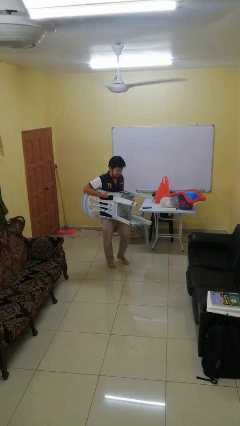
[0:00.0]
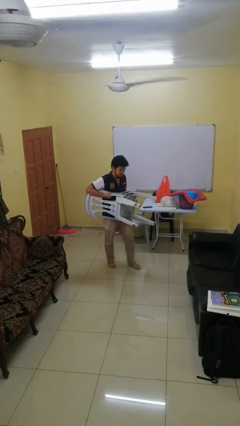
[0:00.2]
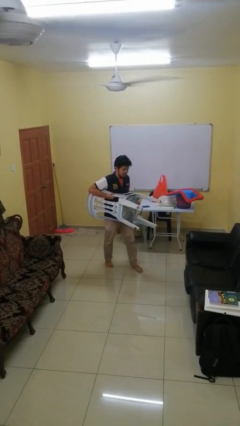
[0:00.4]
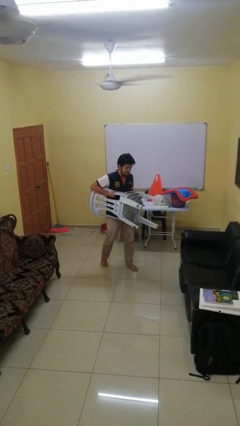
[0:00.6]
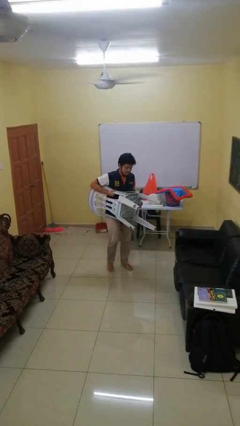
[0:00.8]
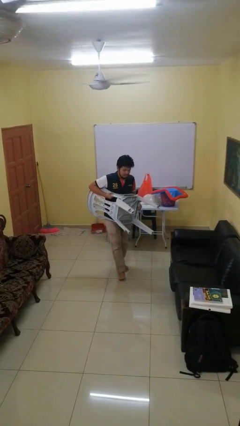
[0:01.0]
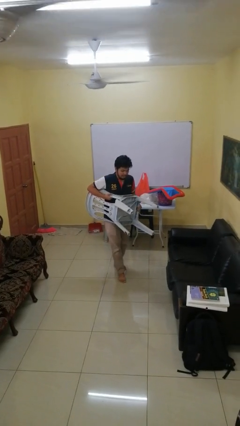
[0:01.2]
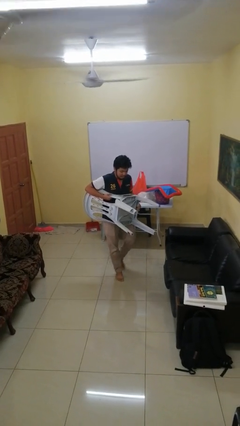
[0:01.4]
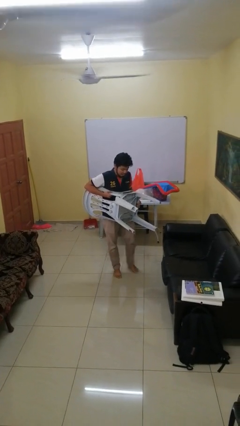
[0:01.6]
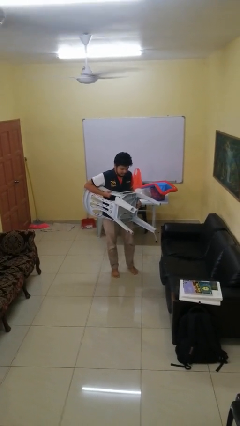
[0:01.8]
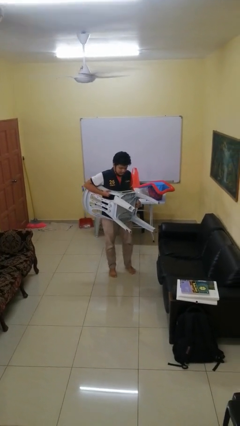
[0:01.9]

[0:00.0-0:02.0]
person carries furniture

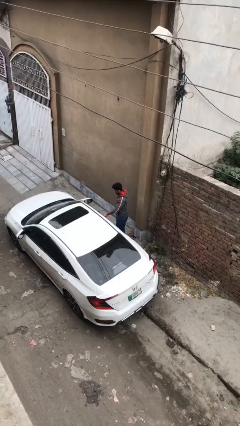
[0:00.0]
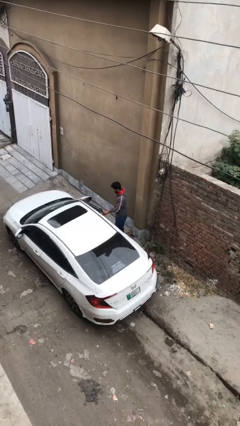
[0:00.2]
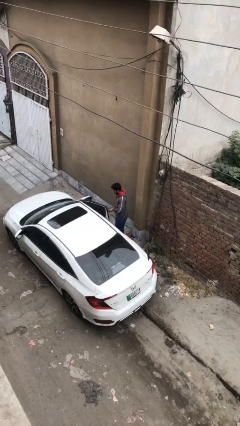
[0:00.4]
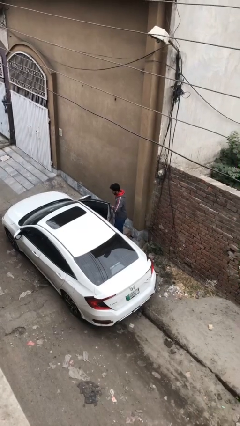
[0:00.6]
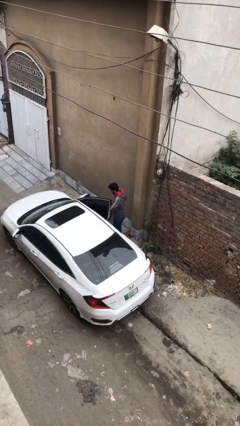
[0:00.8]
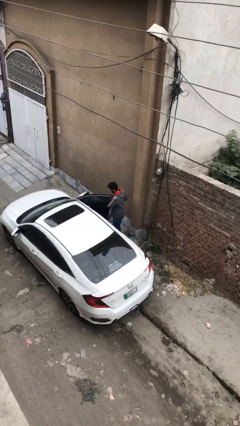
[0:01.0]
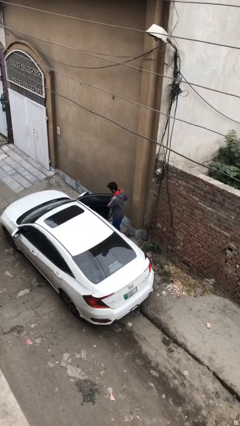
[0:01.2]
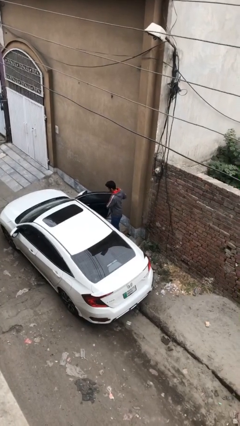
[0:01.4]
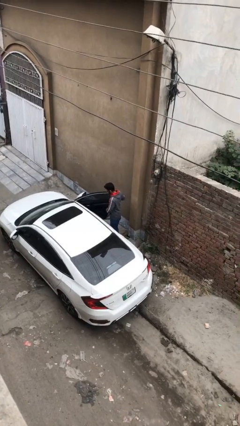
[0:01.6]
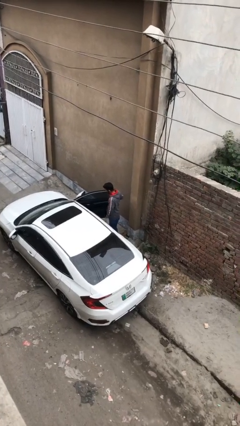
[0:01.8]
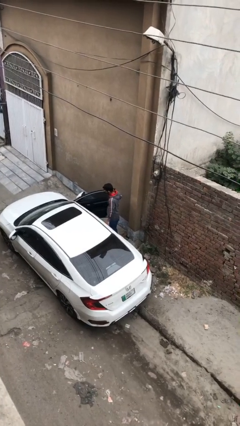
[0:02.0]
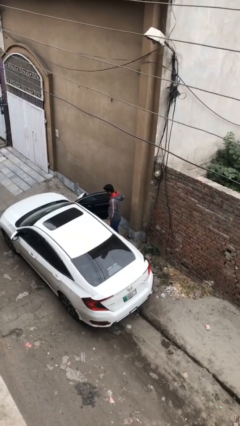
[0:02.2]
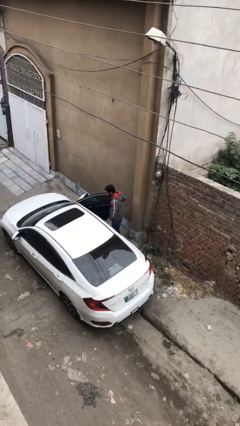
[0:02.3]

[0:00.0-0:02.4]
person opens car door

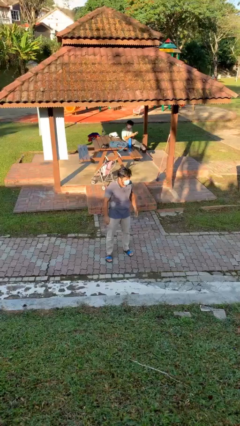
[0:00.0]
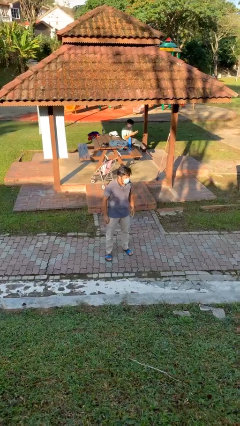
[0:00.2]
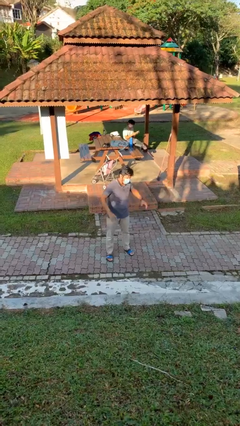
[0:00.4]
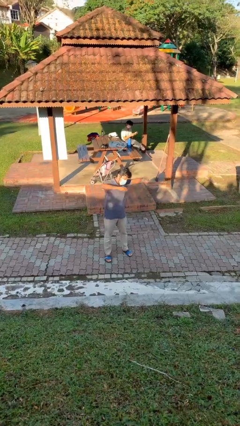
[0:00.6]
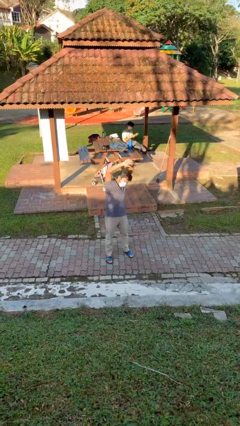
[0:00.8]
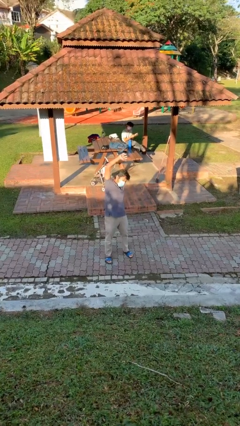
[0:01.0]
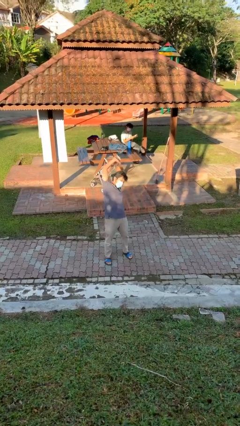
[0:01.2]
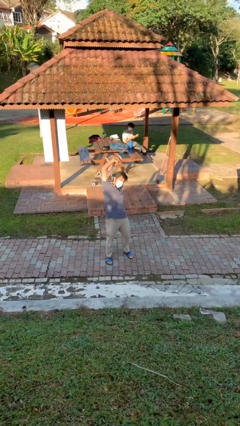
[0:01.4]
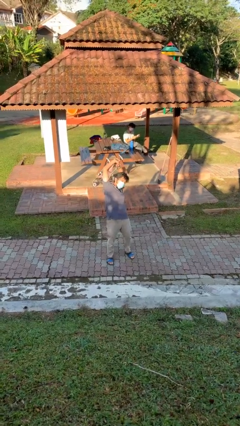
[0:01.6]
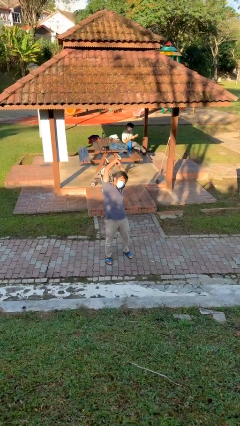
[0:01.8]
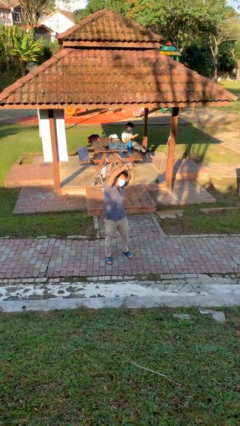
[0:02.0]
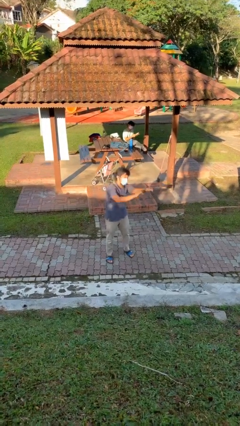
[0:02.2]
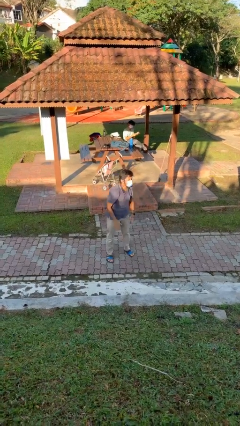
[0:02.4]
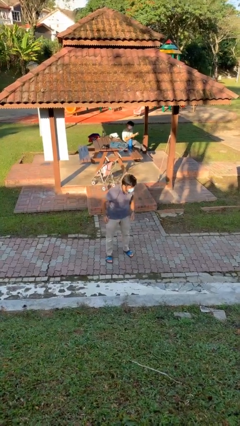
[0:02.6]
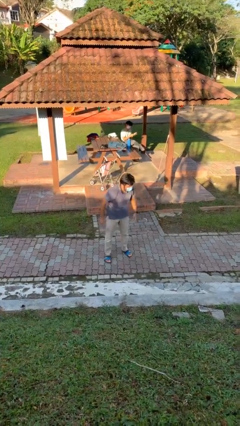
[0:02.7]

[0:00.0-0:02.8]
person stretches arms over head

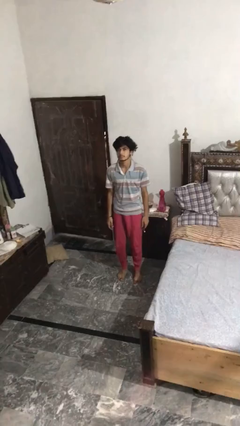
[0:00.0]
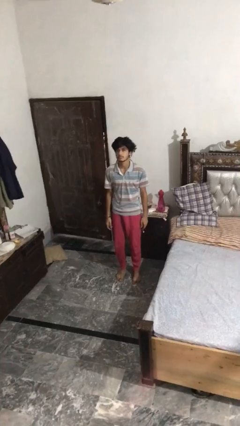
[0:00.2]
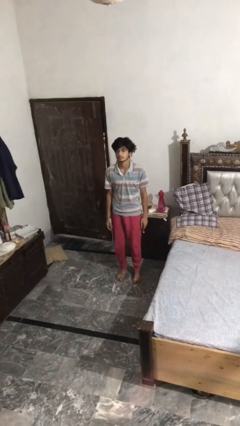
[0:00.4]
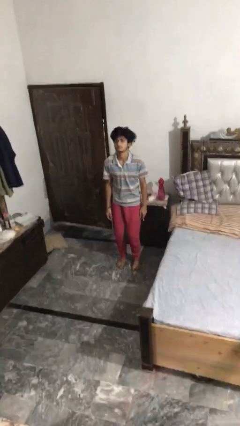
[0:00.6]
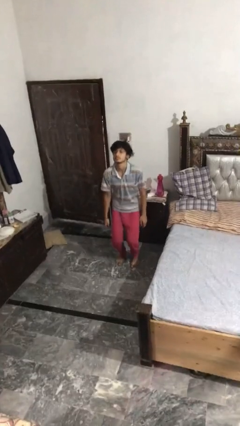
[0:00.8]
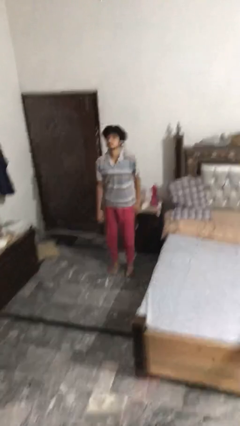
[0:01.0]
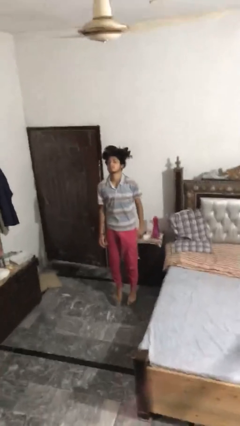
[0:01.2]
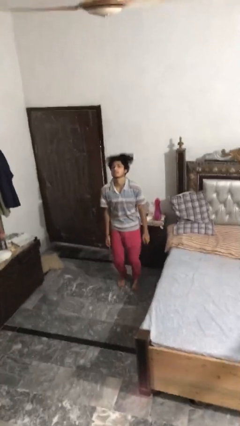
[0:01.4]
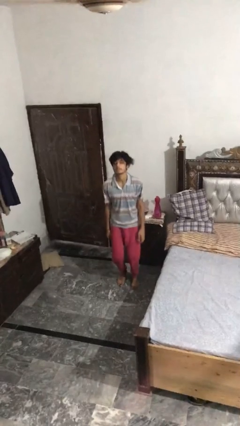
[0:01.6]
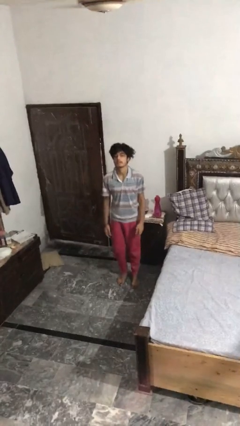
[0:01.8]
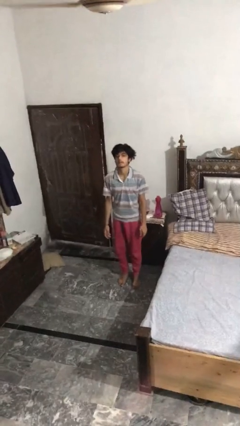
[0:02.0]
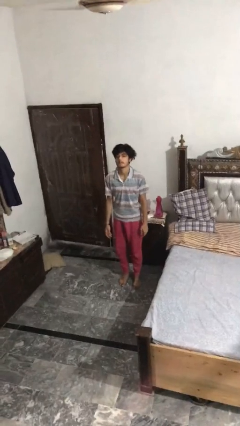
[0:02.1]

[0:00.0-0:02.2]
person jumps

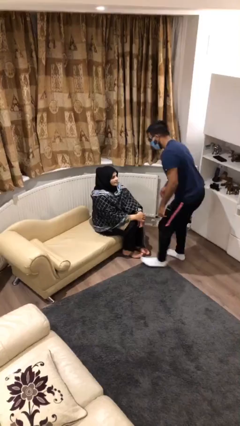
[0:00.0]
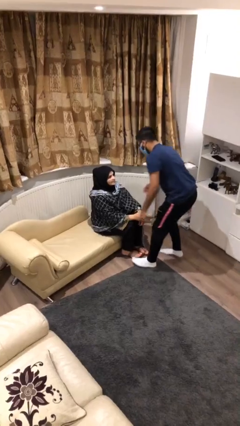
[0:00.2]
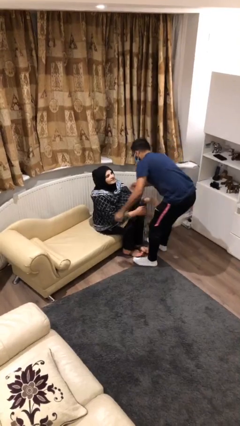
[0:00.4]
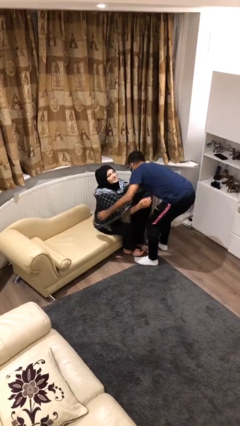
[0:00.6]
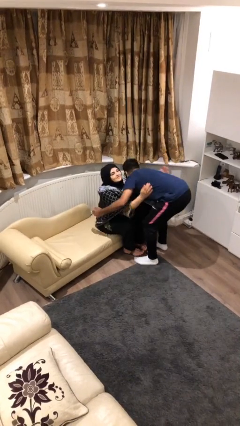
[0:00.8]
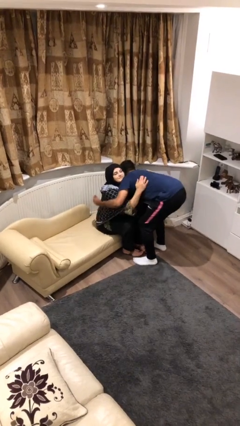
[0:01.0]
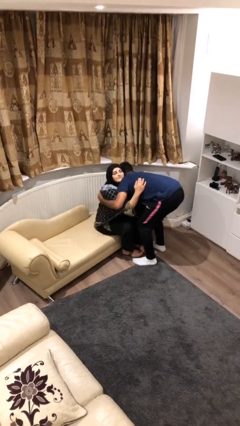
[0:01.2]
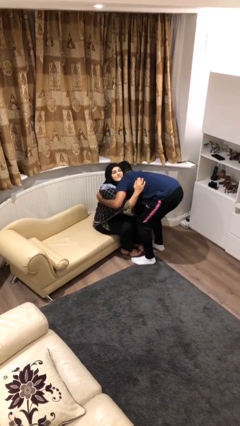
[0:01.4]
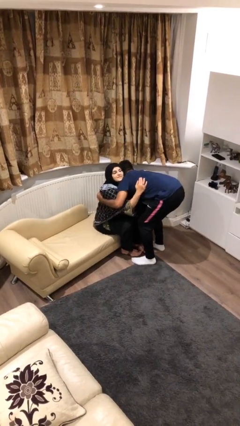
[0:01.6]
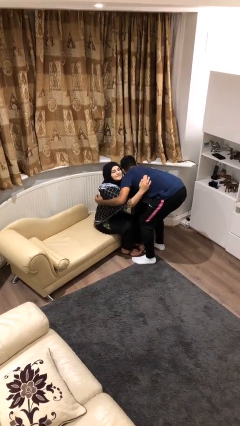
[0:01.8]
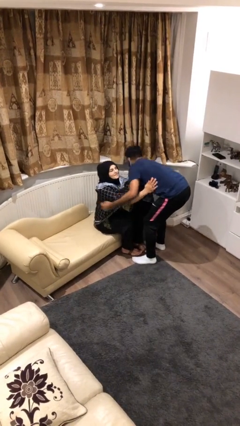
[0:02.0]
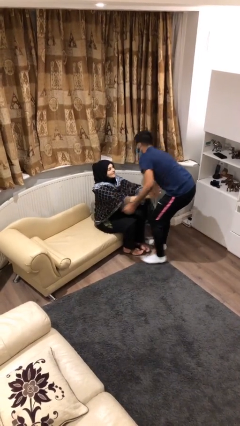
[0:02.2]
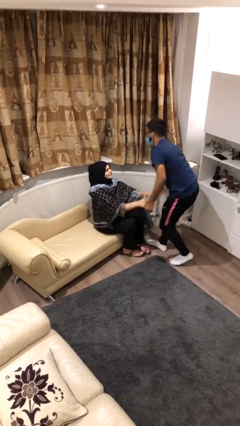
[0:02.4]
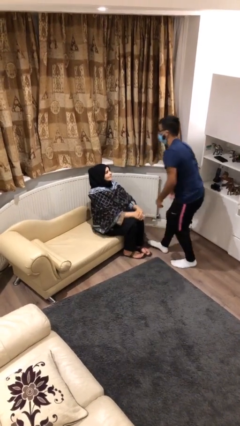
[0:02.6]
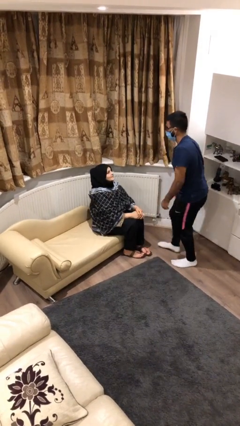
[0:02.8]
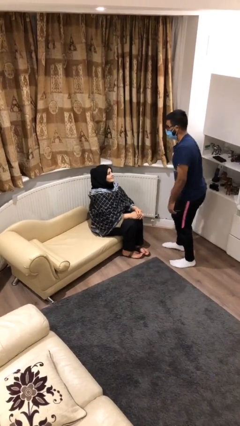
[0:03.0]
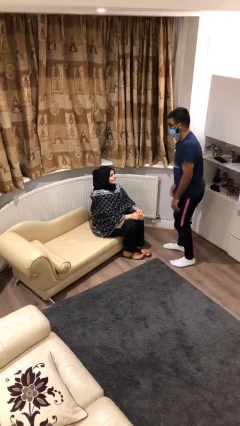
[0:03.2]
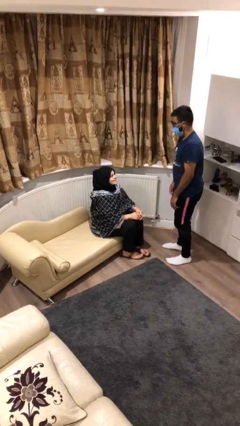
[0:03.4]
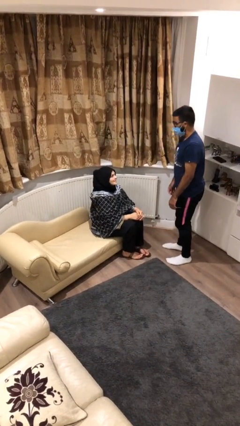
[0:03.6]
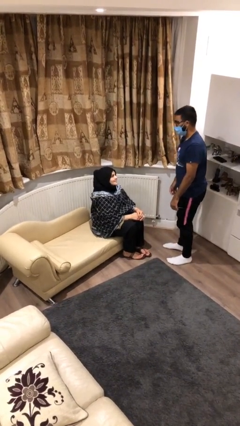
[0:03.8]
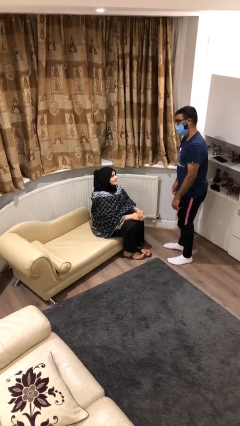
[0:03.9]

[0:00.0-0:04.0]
person embraces person

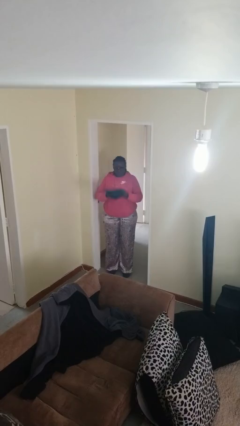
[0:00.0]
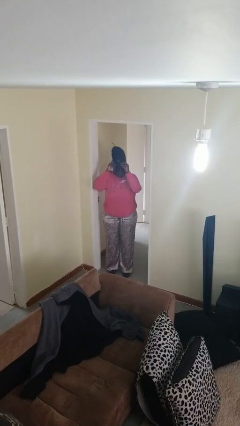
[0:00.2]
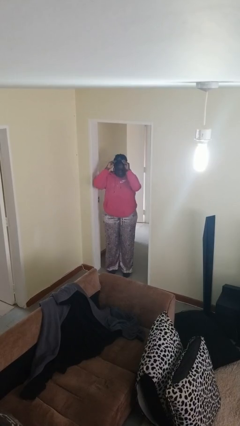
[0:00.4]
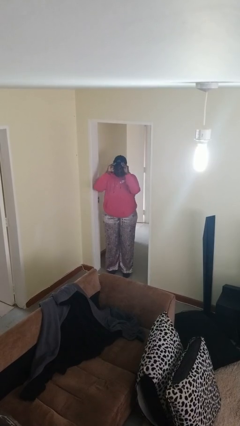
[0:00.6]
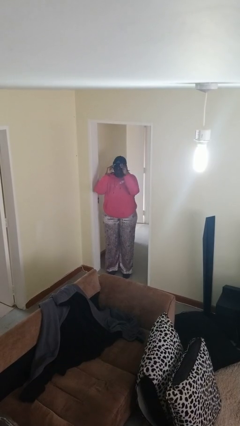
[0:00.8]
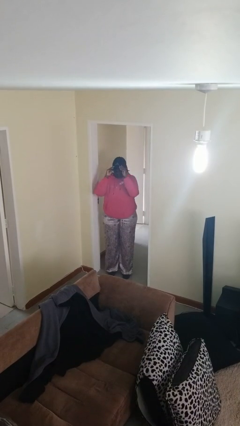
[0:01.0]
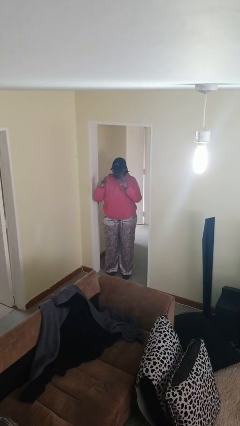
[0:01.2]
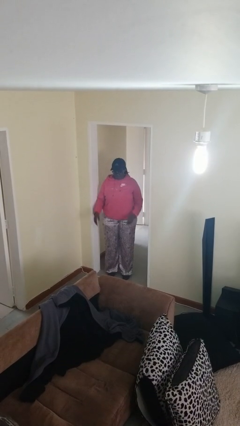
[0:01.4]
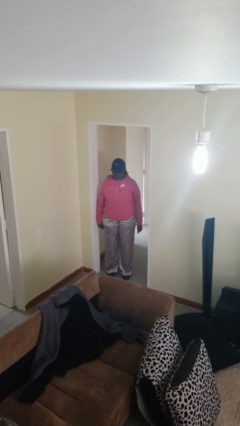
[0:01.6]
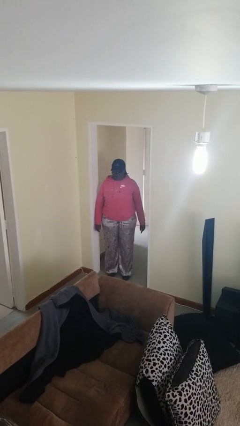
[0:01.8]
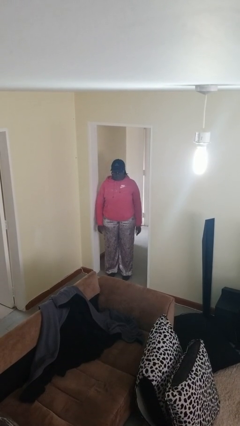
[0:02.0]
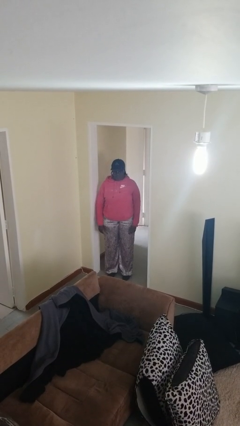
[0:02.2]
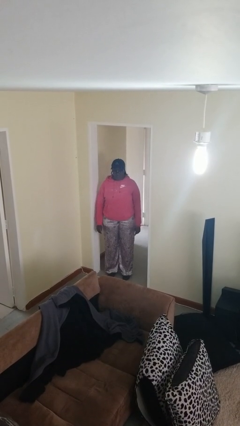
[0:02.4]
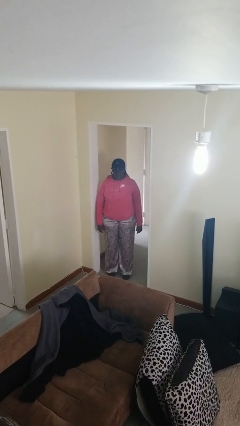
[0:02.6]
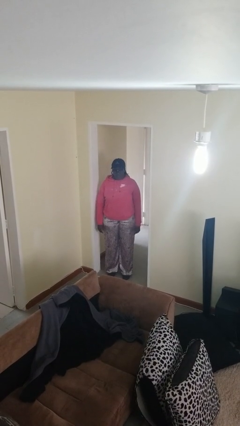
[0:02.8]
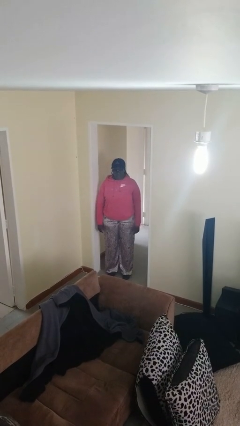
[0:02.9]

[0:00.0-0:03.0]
person puts on hat

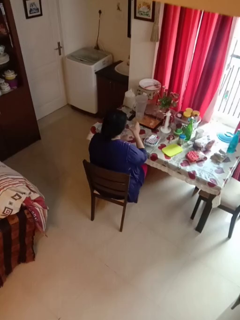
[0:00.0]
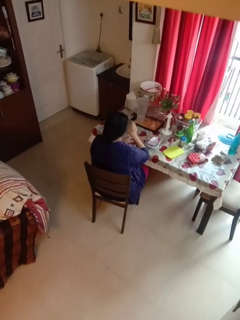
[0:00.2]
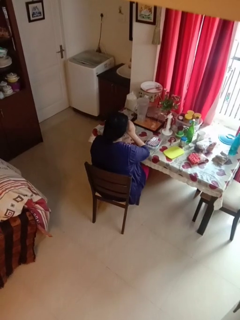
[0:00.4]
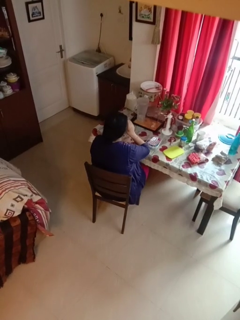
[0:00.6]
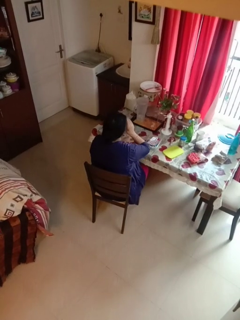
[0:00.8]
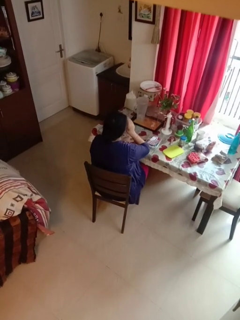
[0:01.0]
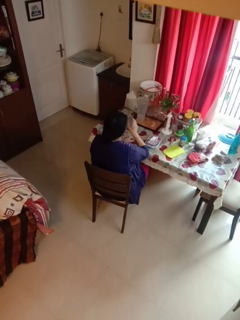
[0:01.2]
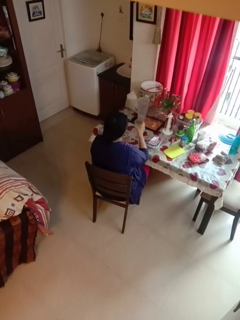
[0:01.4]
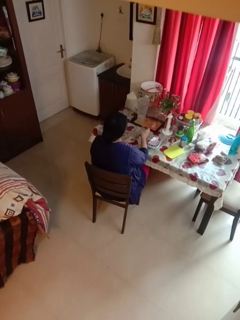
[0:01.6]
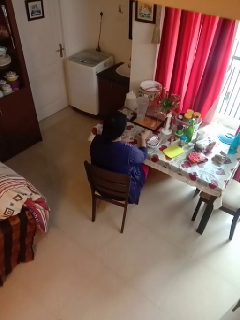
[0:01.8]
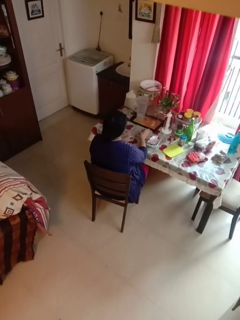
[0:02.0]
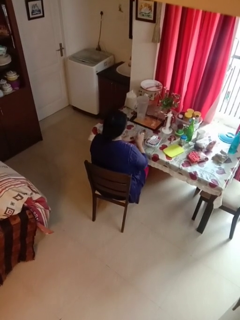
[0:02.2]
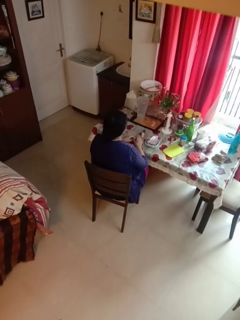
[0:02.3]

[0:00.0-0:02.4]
person drinks from cup
